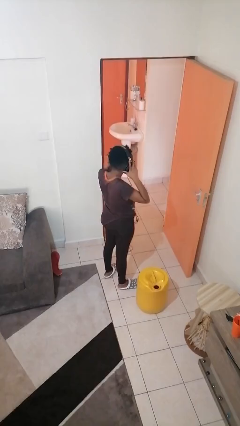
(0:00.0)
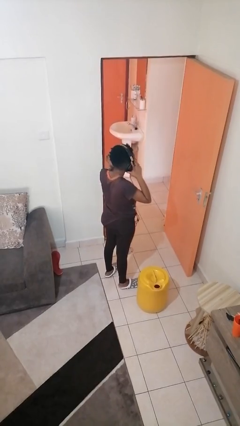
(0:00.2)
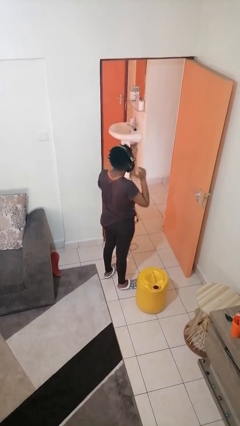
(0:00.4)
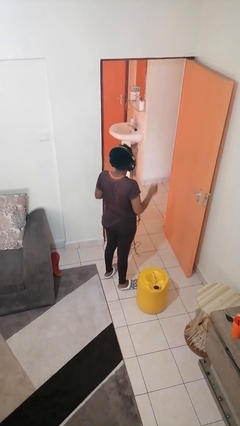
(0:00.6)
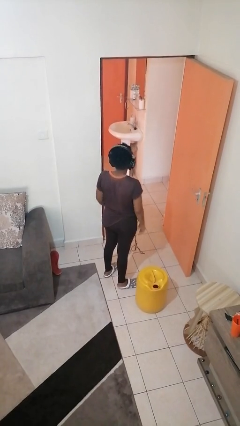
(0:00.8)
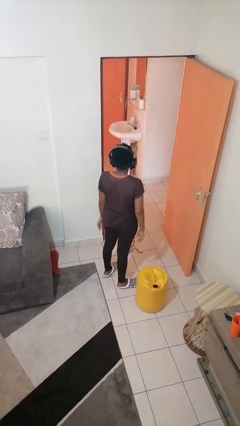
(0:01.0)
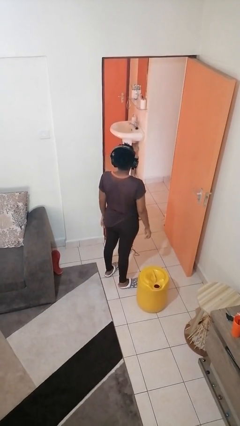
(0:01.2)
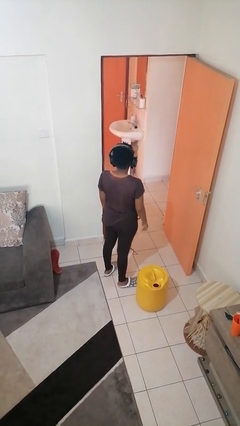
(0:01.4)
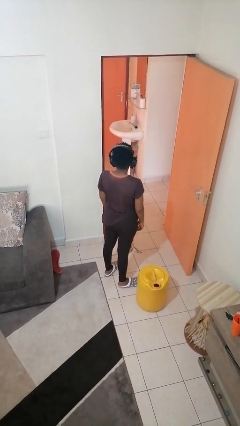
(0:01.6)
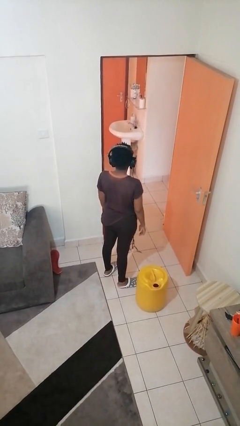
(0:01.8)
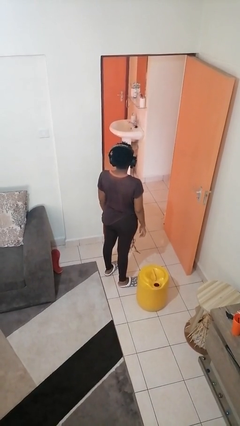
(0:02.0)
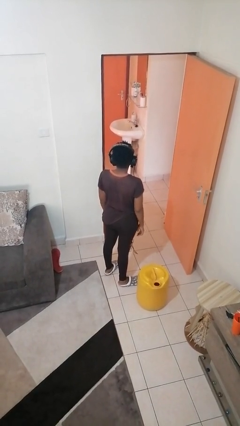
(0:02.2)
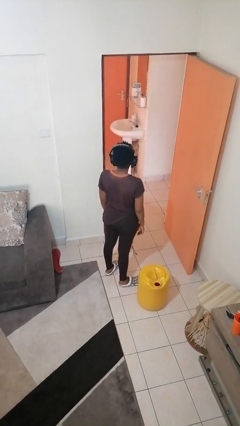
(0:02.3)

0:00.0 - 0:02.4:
person puts on headphones

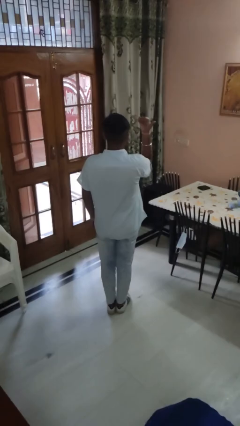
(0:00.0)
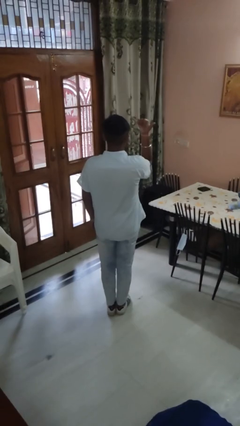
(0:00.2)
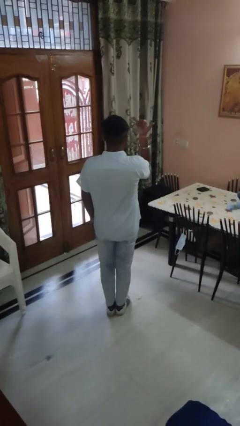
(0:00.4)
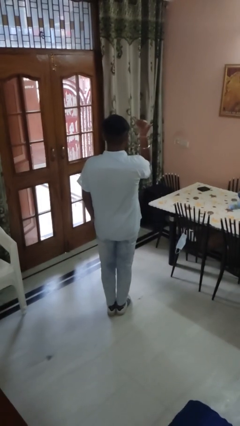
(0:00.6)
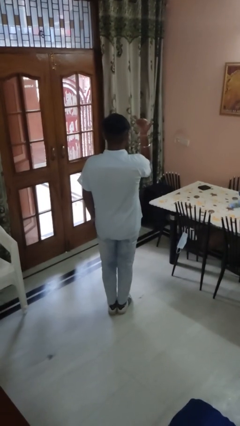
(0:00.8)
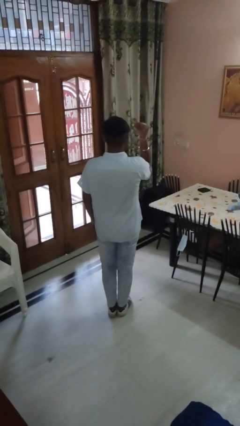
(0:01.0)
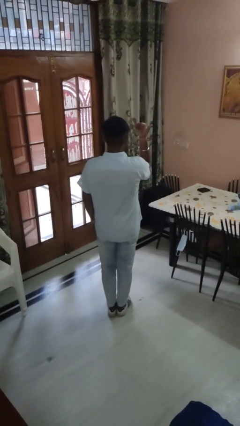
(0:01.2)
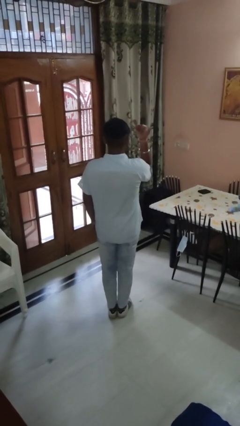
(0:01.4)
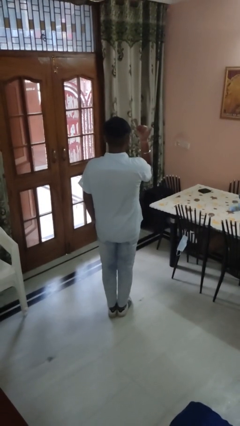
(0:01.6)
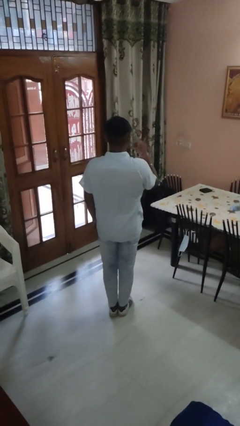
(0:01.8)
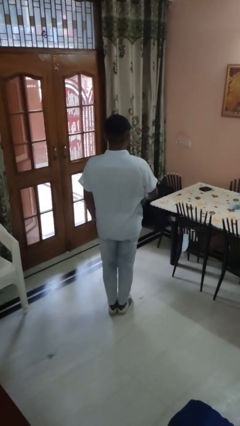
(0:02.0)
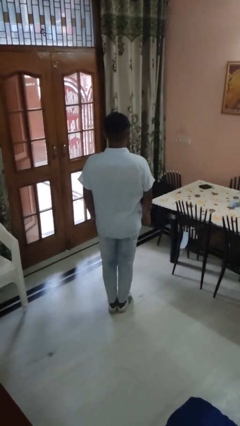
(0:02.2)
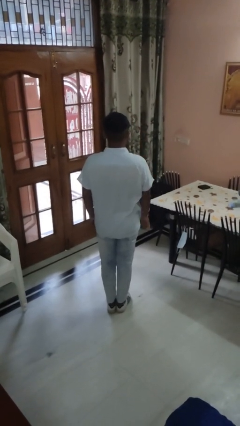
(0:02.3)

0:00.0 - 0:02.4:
person gestures hang loose

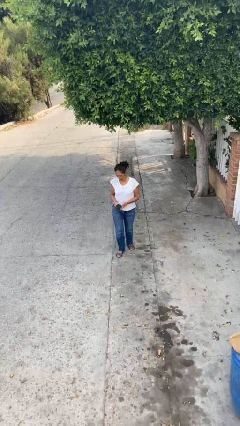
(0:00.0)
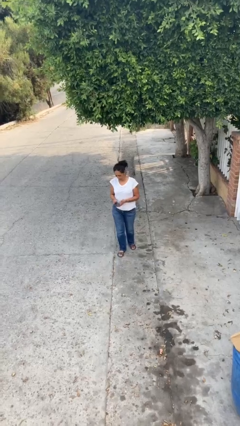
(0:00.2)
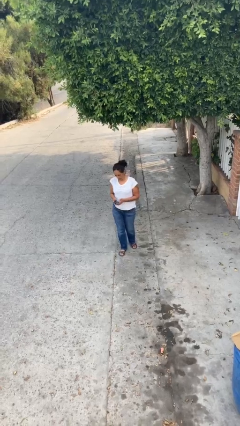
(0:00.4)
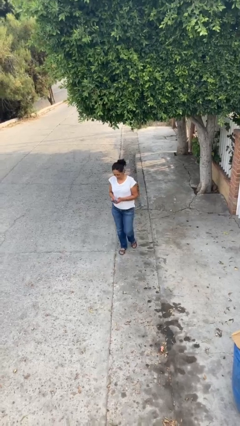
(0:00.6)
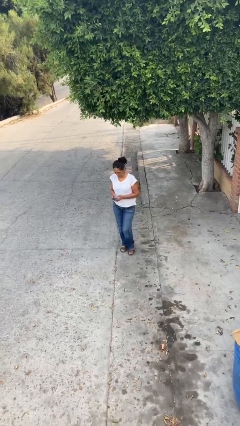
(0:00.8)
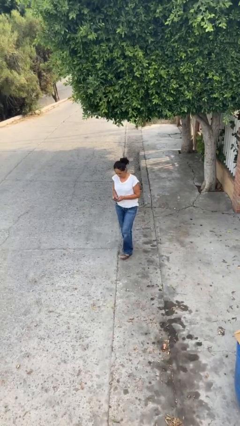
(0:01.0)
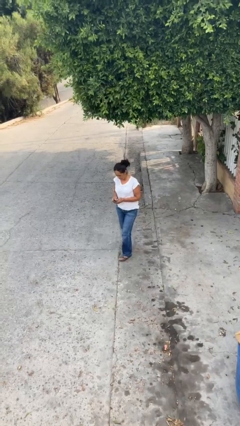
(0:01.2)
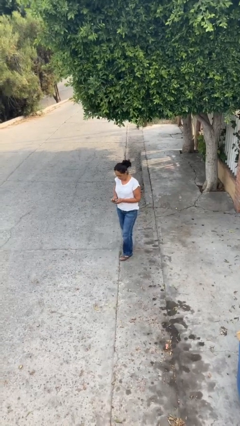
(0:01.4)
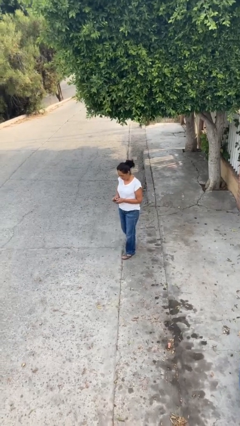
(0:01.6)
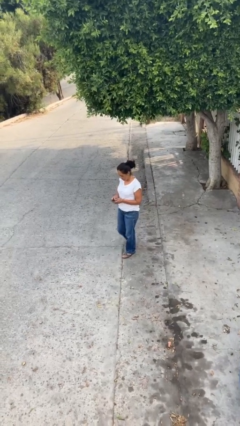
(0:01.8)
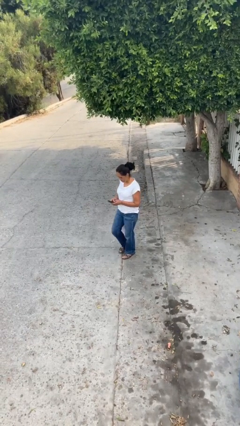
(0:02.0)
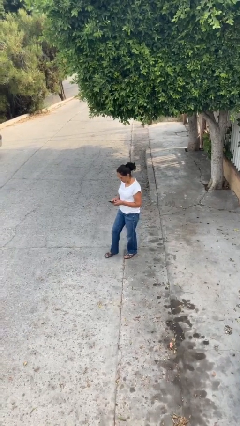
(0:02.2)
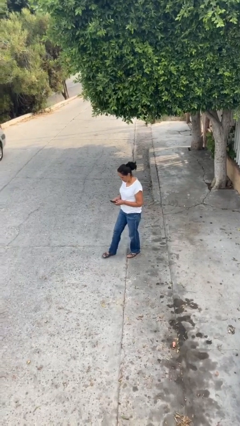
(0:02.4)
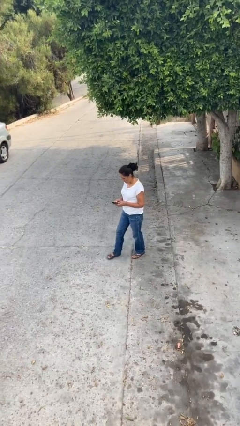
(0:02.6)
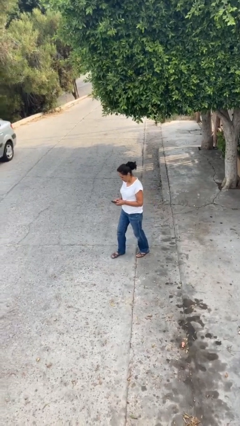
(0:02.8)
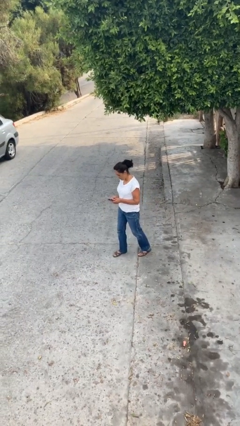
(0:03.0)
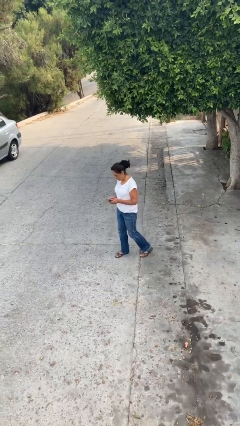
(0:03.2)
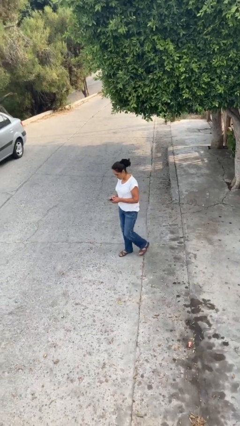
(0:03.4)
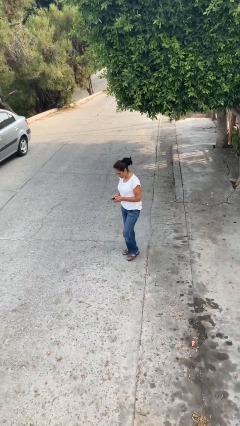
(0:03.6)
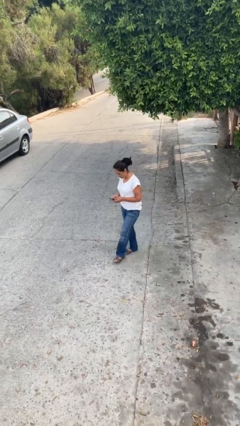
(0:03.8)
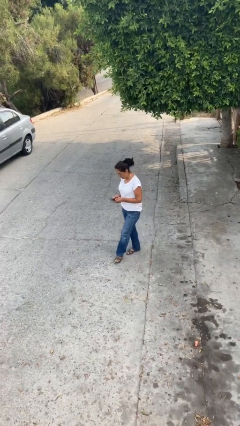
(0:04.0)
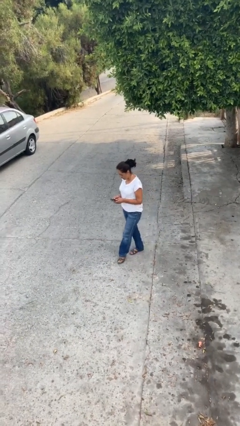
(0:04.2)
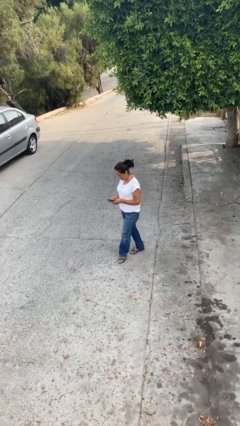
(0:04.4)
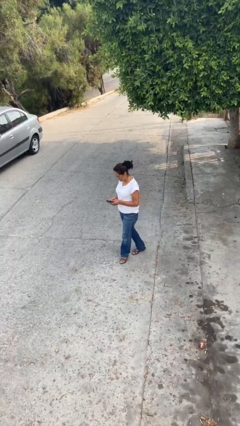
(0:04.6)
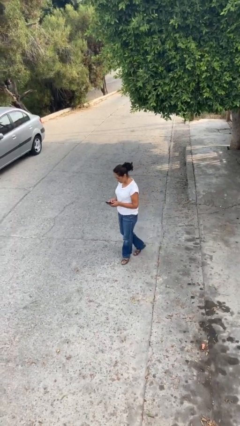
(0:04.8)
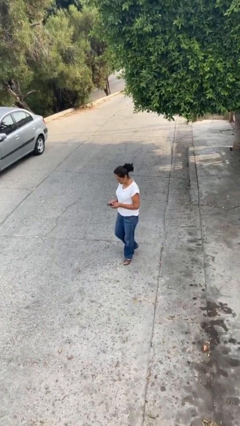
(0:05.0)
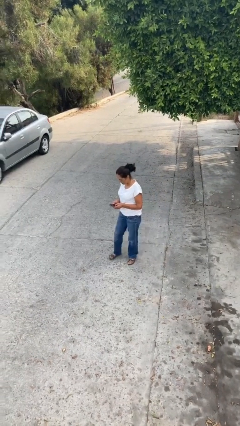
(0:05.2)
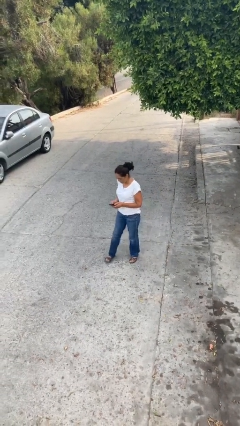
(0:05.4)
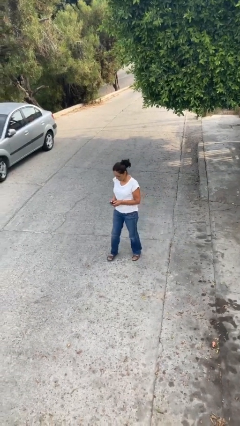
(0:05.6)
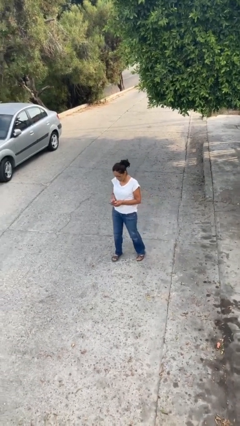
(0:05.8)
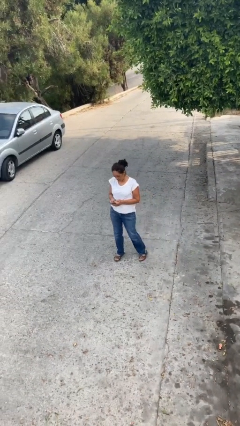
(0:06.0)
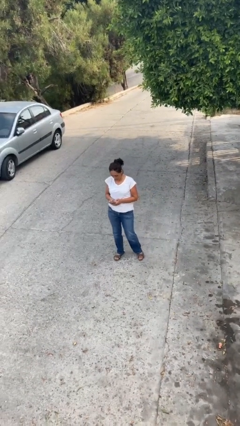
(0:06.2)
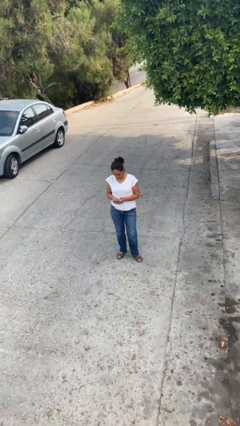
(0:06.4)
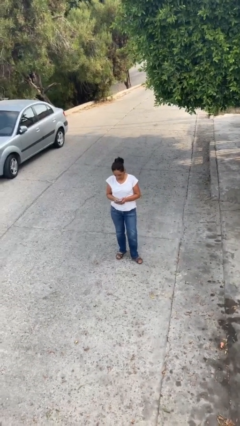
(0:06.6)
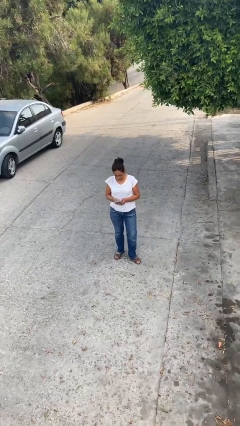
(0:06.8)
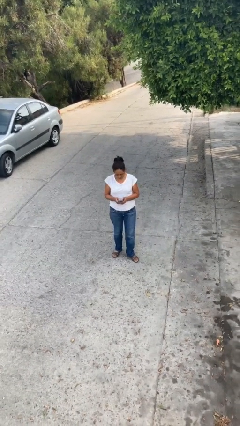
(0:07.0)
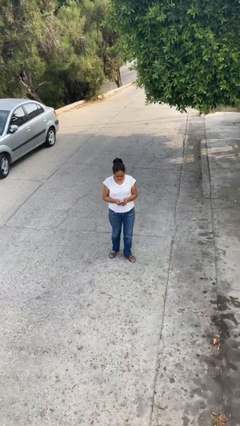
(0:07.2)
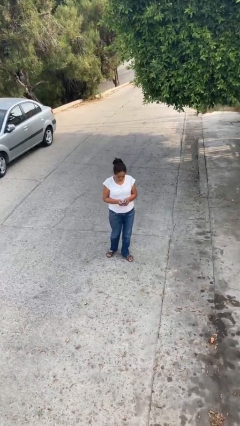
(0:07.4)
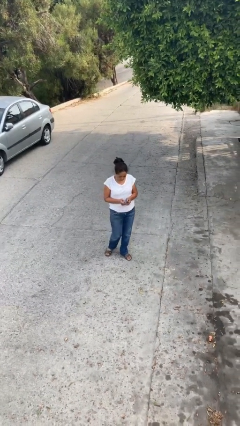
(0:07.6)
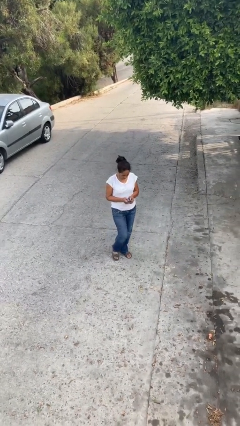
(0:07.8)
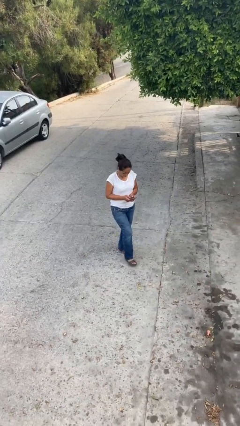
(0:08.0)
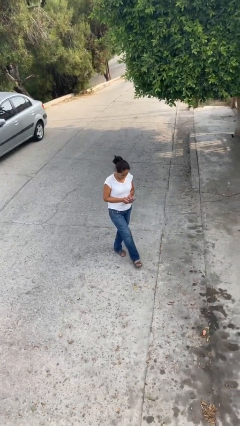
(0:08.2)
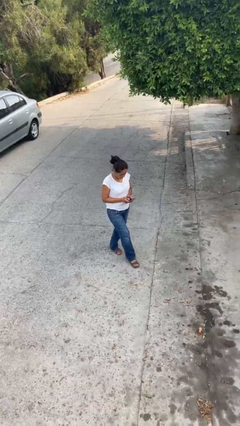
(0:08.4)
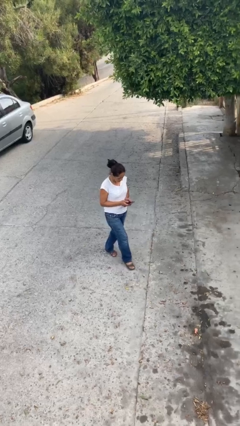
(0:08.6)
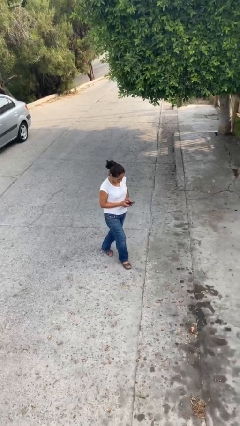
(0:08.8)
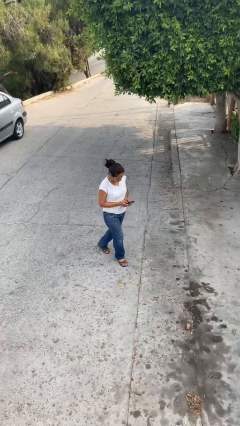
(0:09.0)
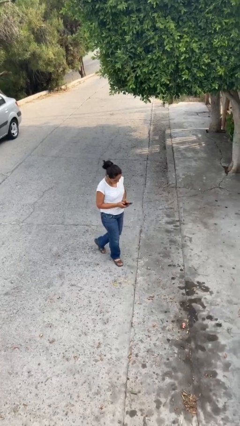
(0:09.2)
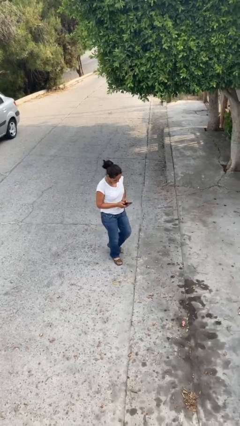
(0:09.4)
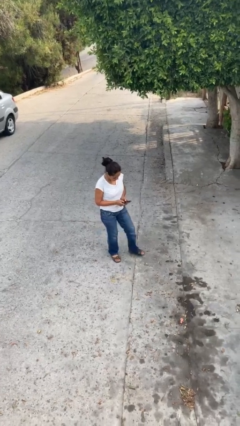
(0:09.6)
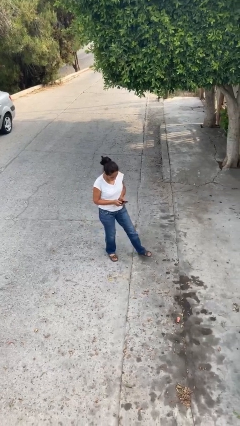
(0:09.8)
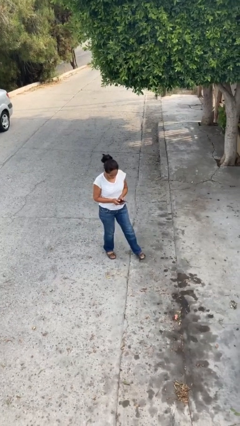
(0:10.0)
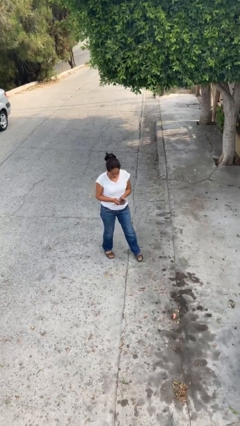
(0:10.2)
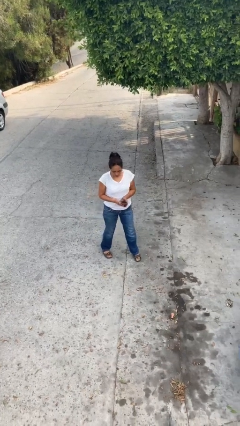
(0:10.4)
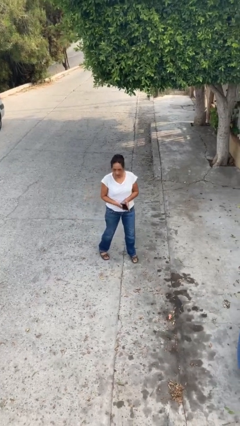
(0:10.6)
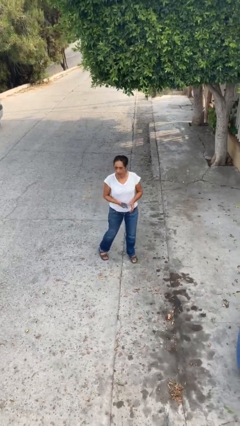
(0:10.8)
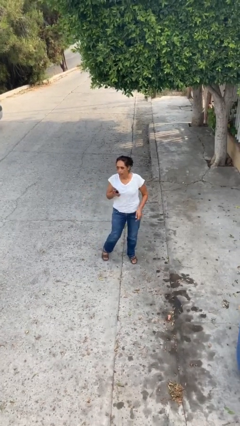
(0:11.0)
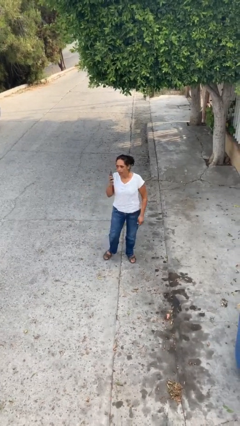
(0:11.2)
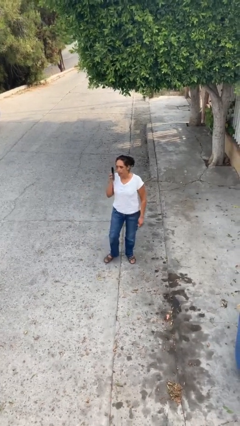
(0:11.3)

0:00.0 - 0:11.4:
person texts on phone

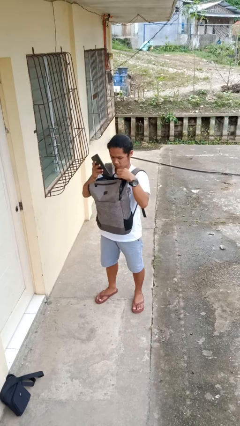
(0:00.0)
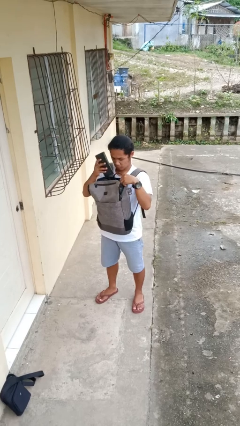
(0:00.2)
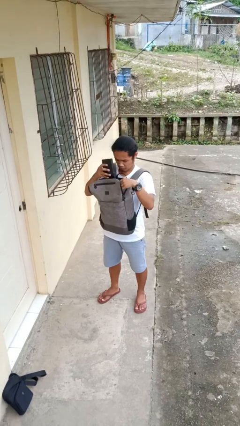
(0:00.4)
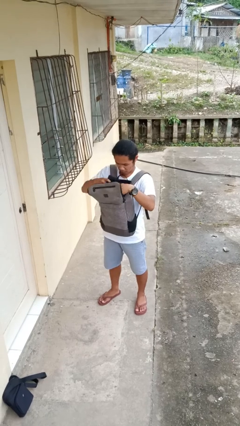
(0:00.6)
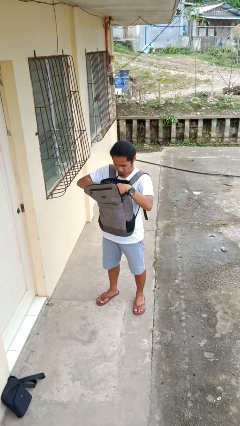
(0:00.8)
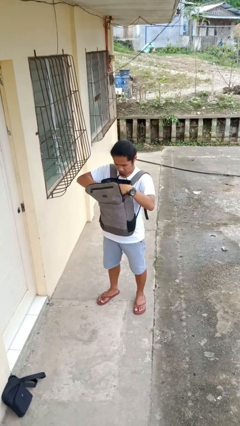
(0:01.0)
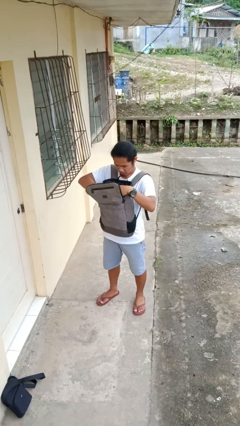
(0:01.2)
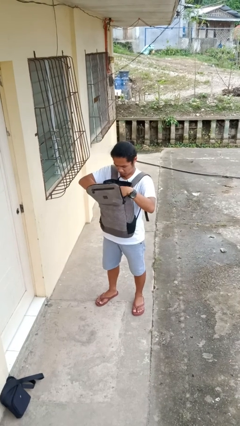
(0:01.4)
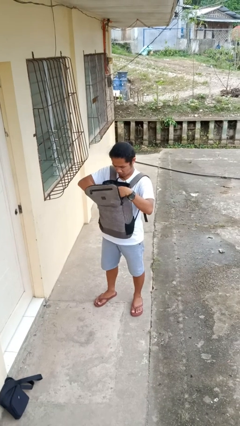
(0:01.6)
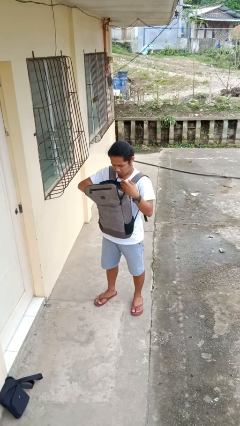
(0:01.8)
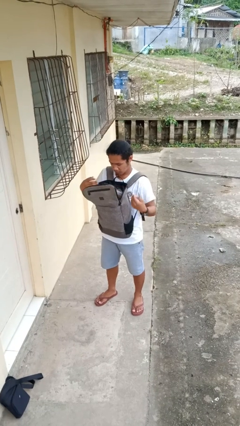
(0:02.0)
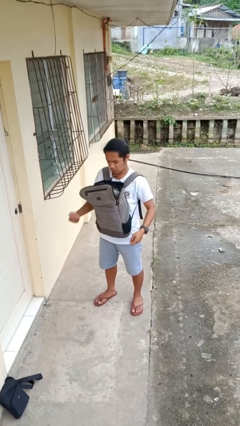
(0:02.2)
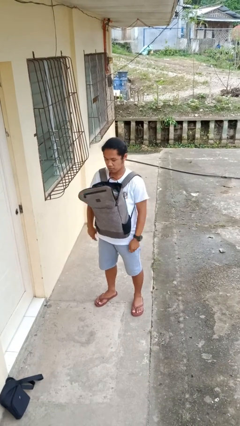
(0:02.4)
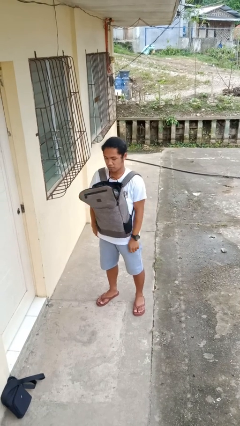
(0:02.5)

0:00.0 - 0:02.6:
person puts object into backpack
